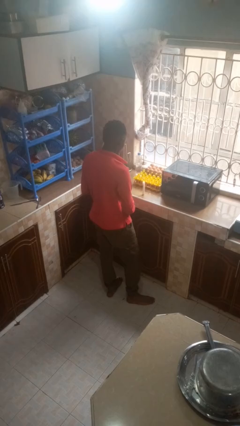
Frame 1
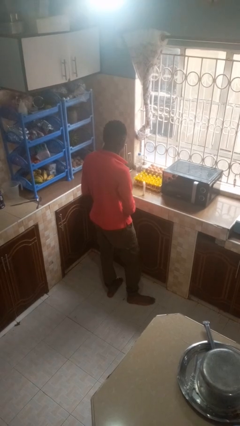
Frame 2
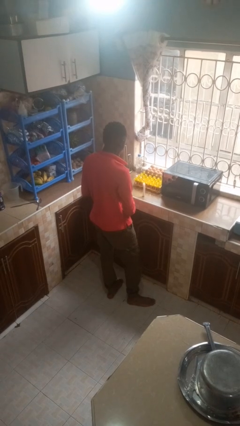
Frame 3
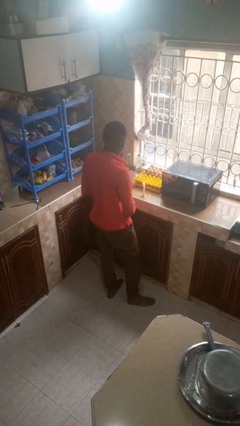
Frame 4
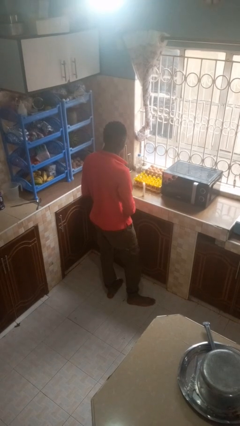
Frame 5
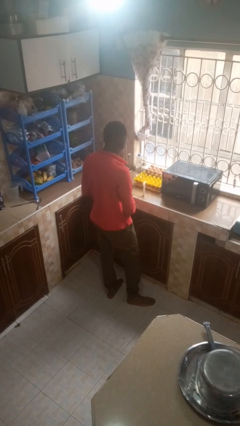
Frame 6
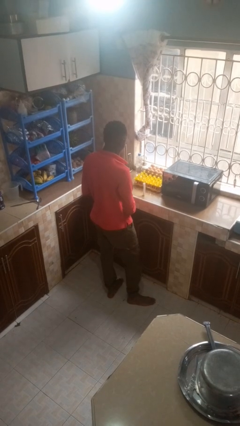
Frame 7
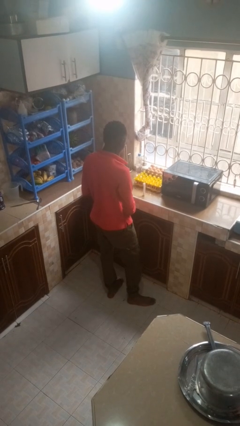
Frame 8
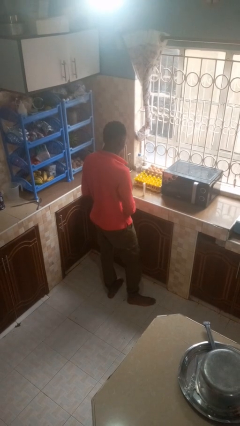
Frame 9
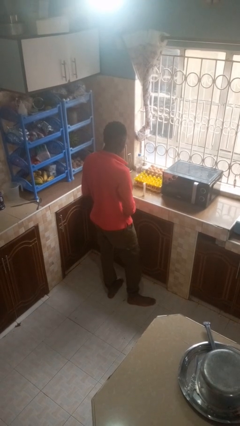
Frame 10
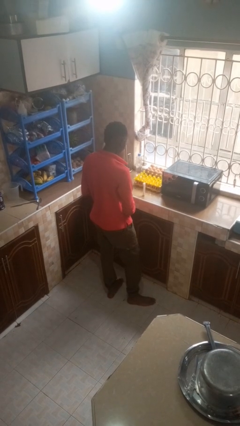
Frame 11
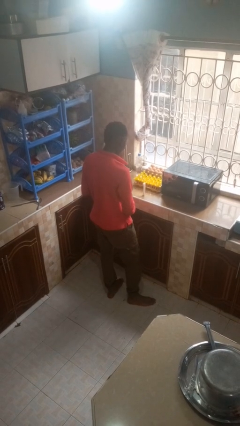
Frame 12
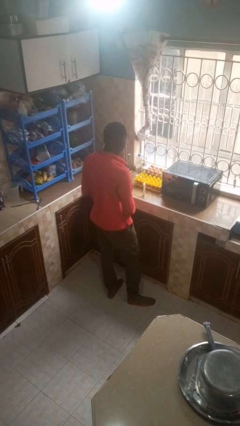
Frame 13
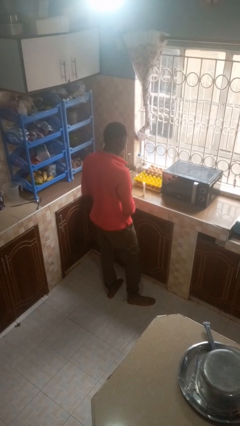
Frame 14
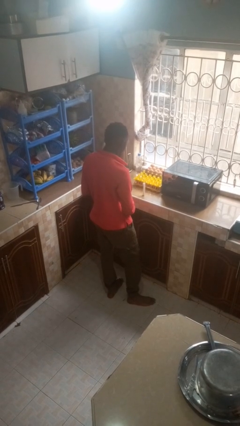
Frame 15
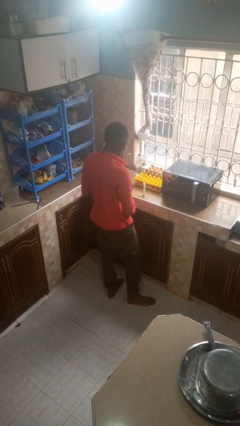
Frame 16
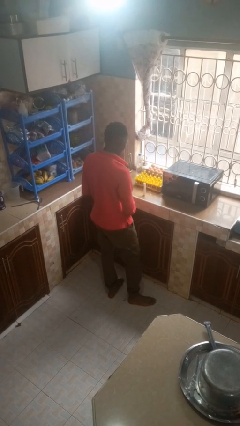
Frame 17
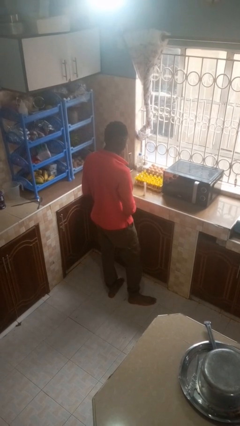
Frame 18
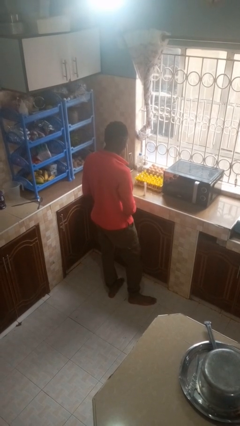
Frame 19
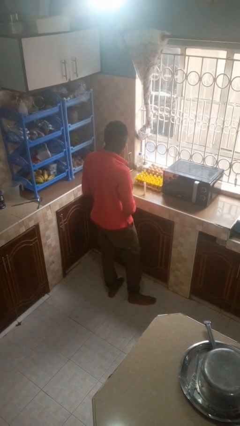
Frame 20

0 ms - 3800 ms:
person extinguishes candle

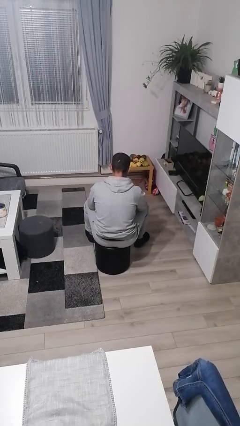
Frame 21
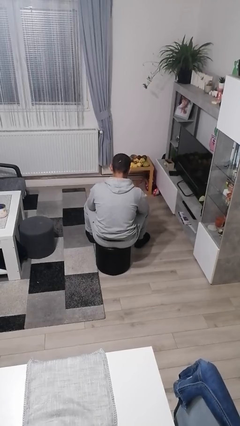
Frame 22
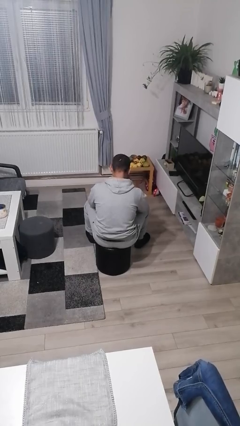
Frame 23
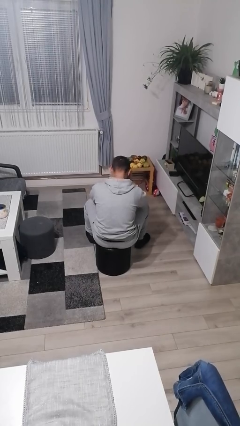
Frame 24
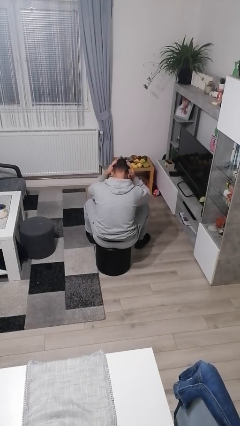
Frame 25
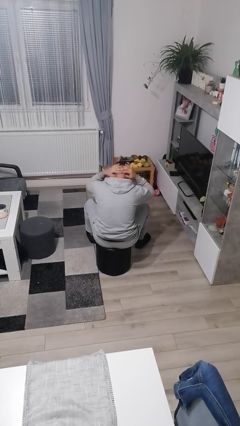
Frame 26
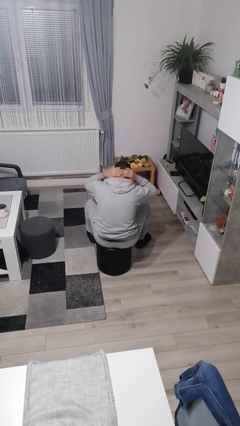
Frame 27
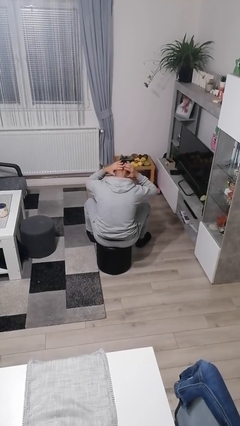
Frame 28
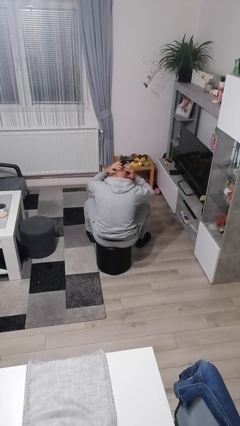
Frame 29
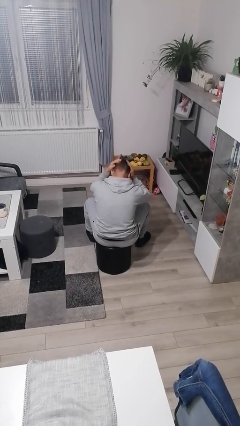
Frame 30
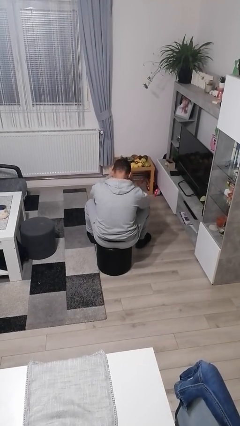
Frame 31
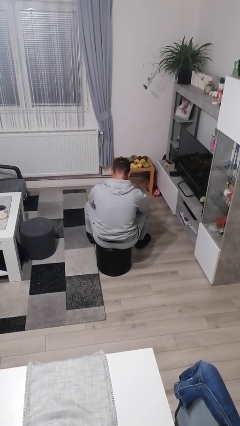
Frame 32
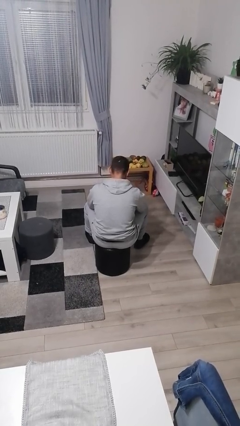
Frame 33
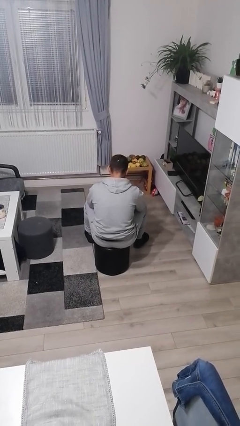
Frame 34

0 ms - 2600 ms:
person strokes hair

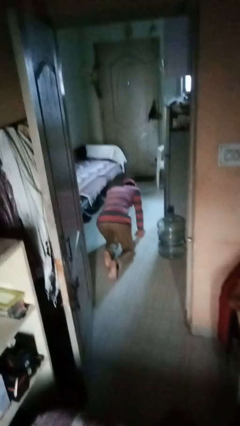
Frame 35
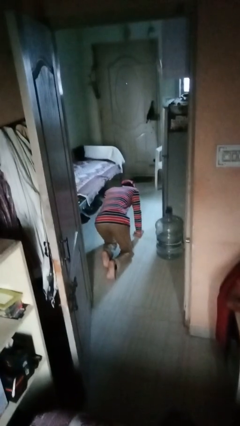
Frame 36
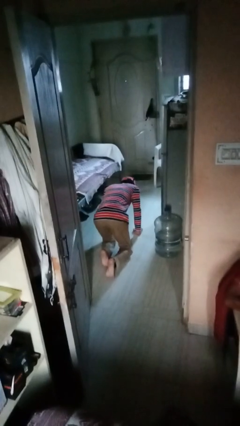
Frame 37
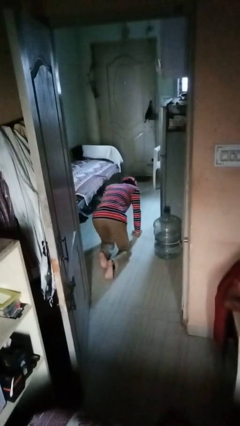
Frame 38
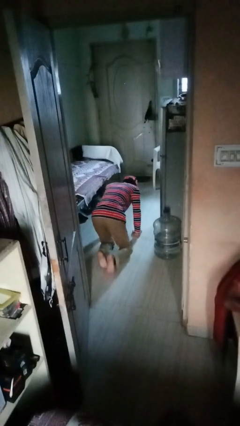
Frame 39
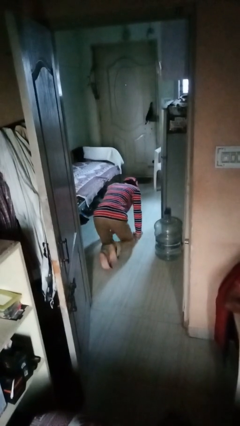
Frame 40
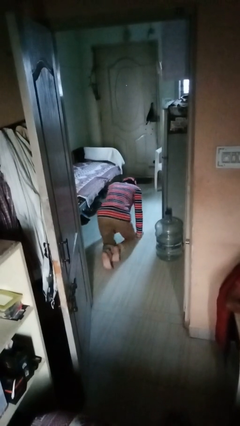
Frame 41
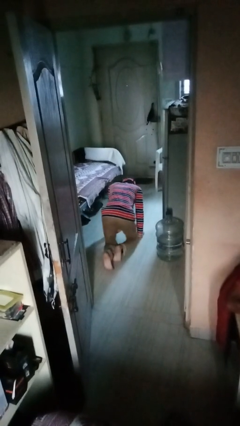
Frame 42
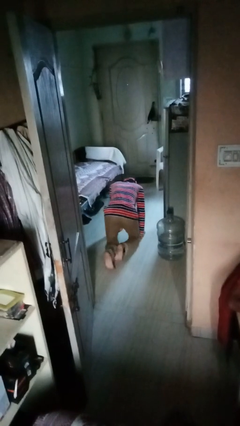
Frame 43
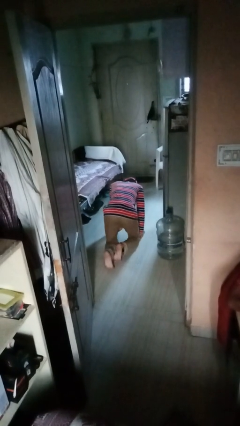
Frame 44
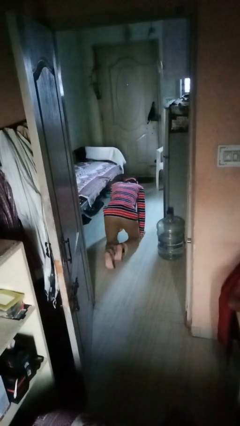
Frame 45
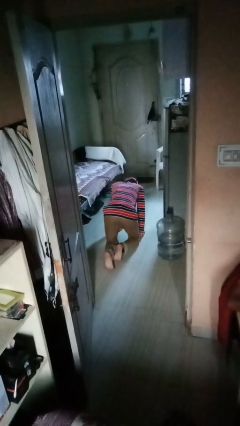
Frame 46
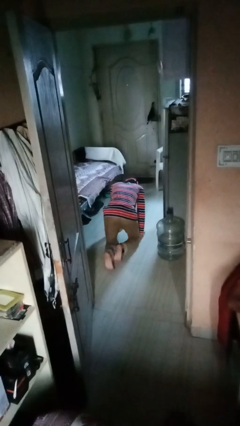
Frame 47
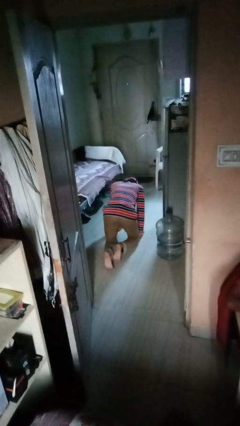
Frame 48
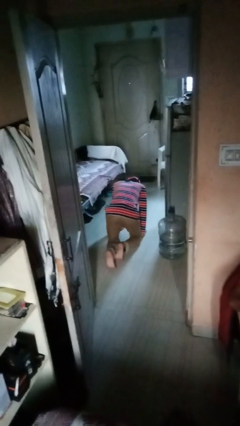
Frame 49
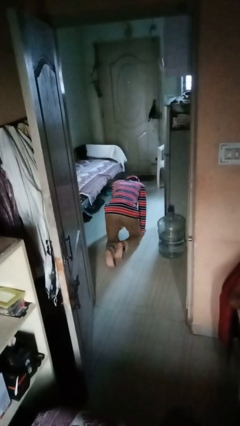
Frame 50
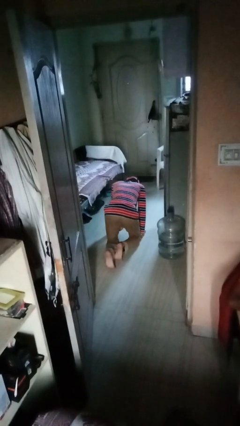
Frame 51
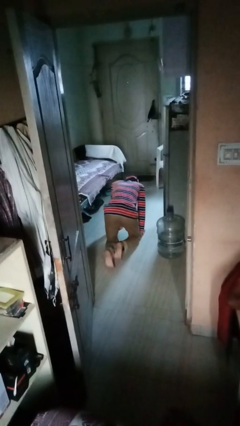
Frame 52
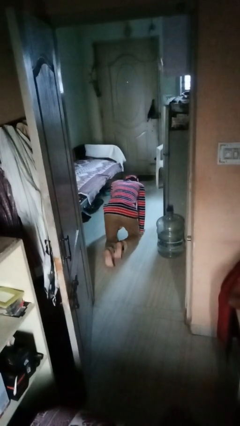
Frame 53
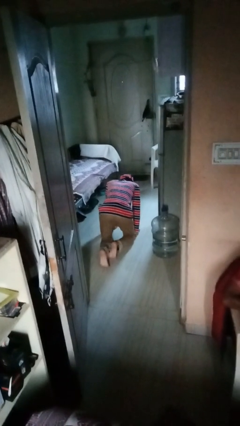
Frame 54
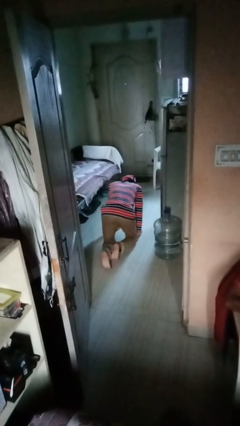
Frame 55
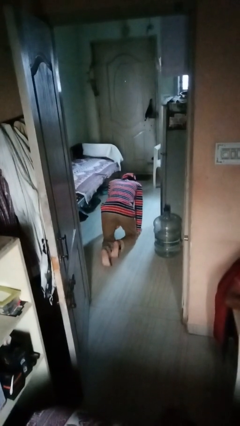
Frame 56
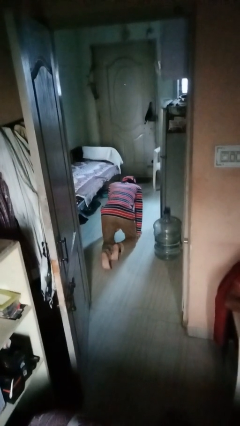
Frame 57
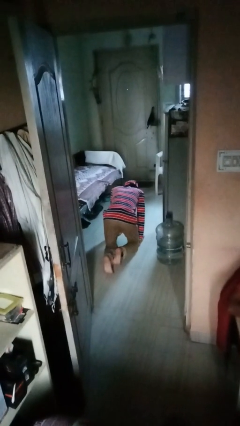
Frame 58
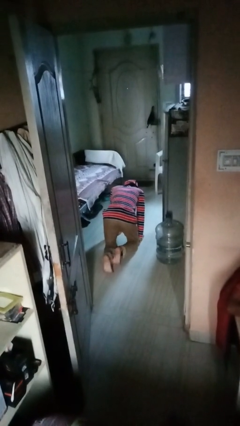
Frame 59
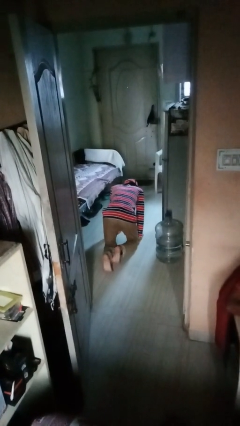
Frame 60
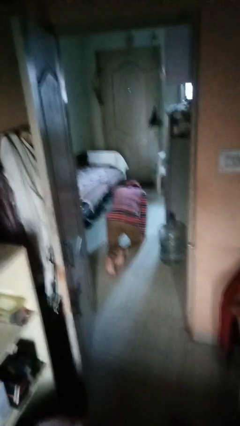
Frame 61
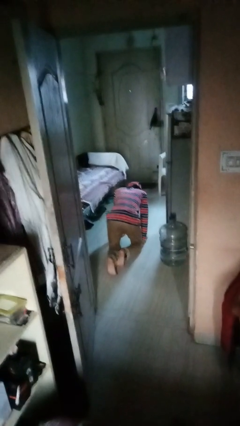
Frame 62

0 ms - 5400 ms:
person crawls

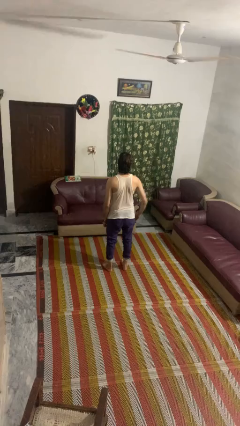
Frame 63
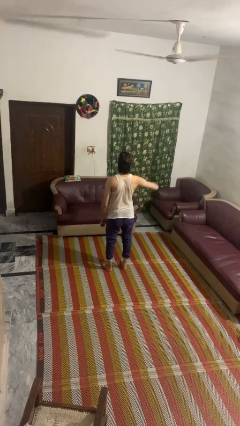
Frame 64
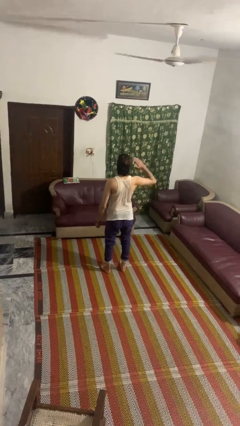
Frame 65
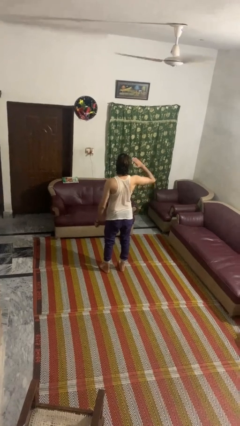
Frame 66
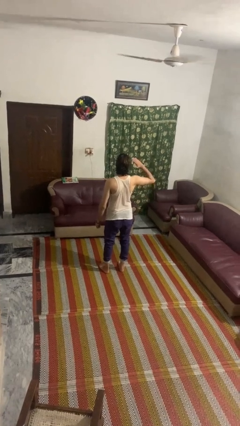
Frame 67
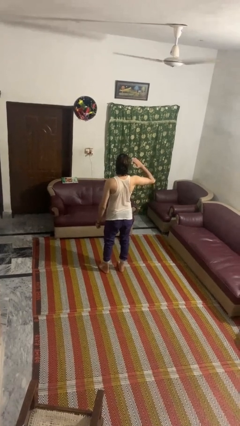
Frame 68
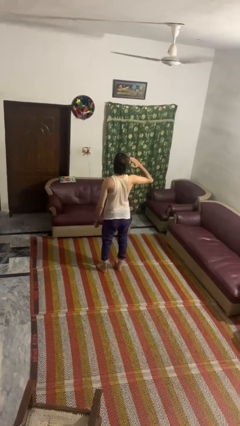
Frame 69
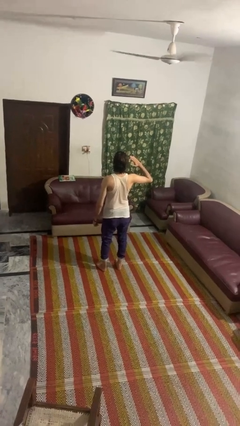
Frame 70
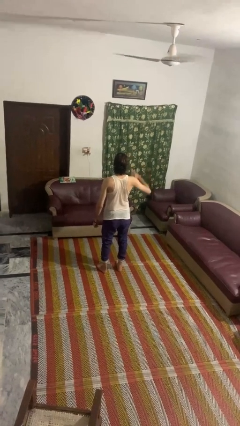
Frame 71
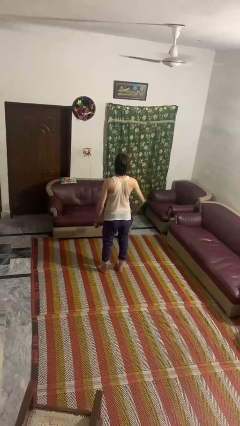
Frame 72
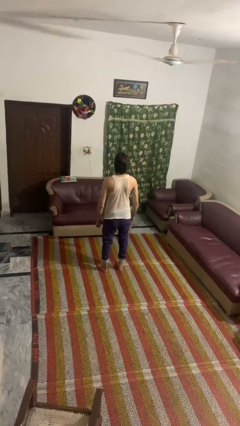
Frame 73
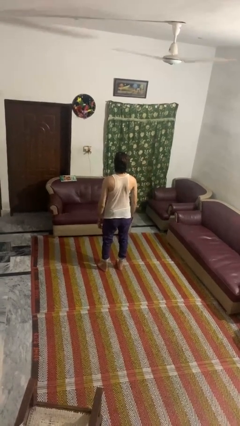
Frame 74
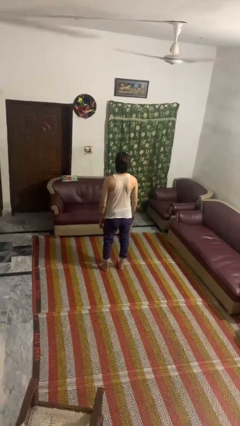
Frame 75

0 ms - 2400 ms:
person salutes

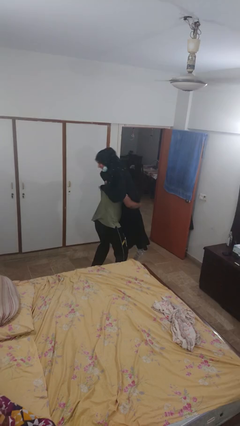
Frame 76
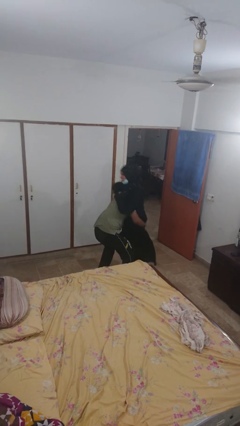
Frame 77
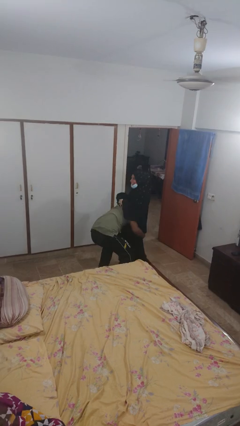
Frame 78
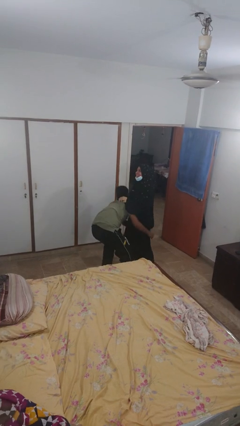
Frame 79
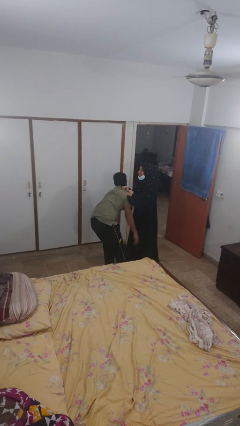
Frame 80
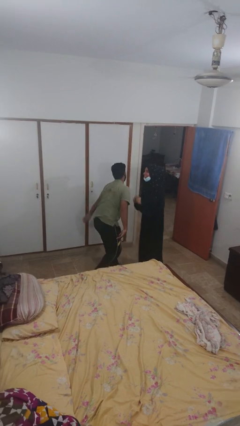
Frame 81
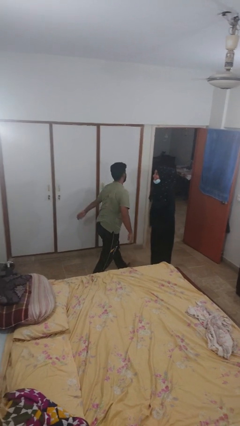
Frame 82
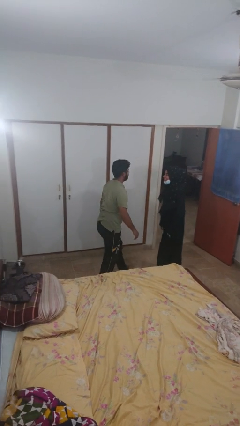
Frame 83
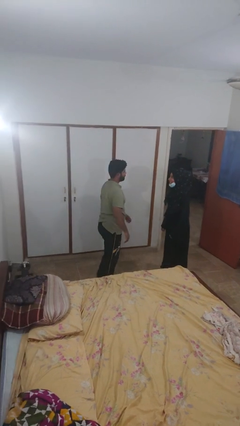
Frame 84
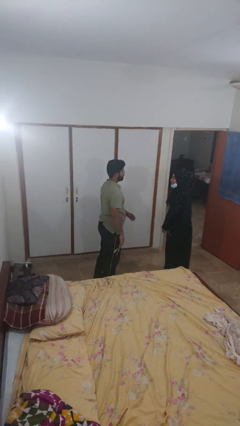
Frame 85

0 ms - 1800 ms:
person puts down person

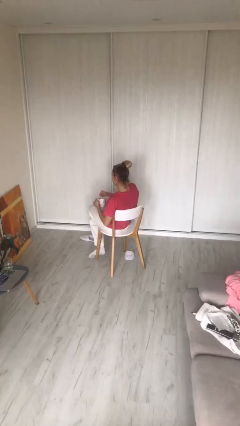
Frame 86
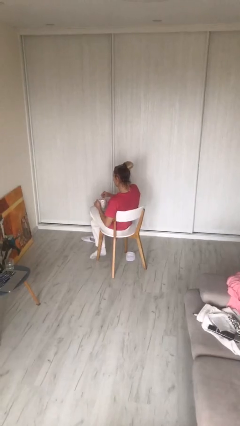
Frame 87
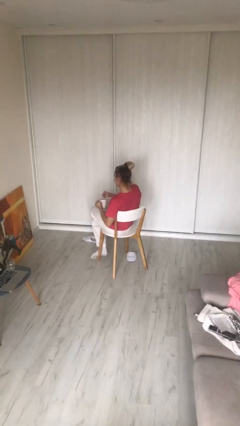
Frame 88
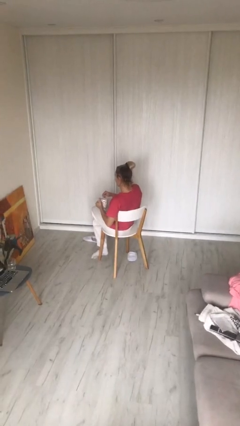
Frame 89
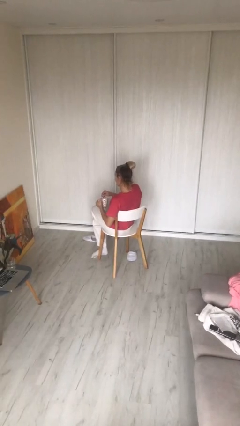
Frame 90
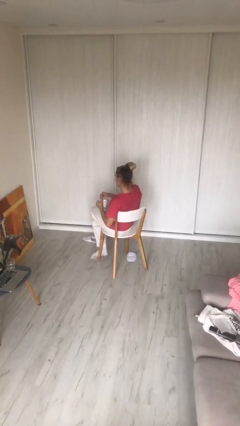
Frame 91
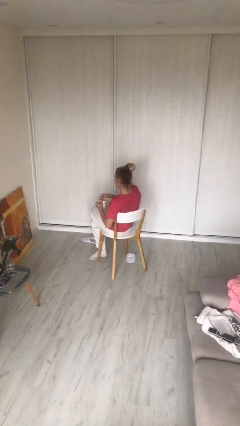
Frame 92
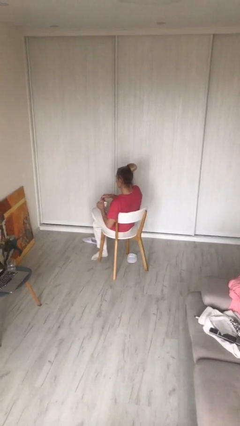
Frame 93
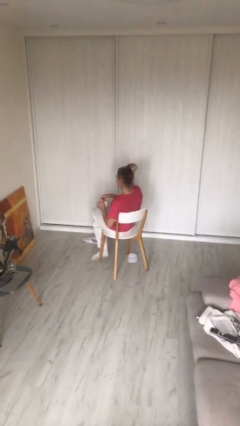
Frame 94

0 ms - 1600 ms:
person stirs mug
